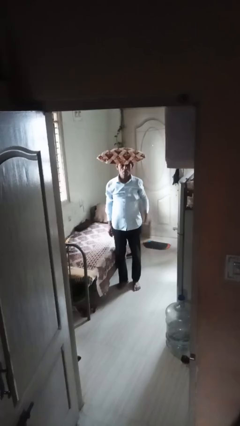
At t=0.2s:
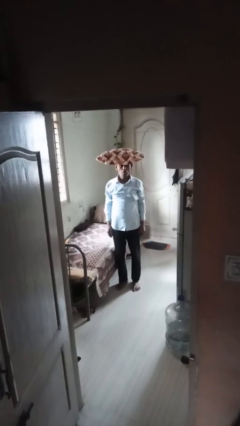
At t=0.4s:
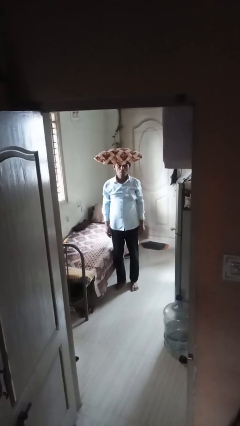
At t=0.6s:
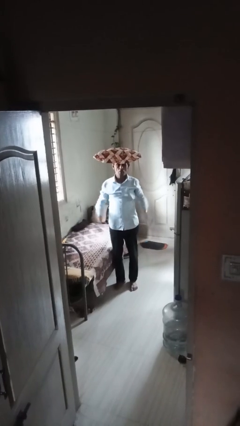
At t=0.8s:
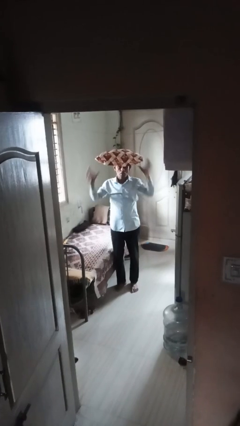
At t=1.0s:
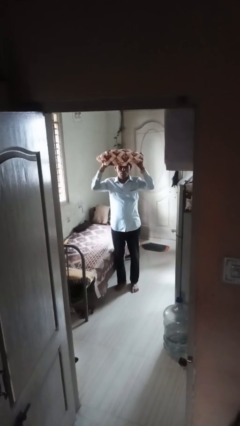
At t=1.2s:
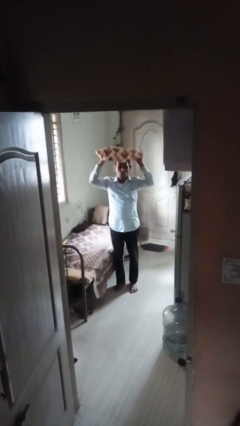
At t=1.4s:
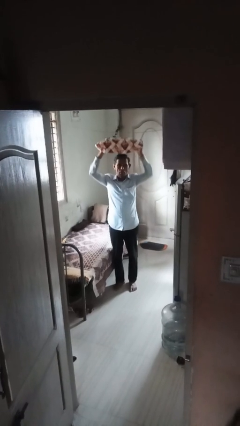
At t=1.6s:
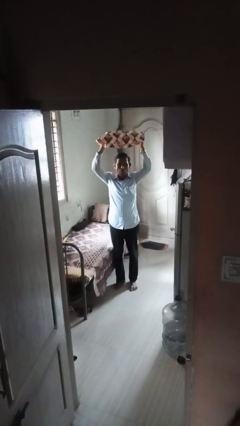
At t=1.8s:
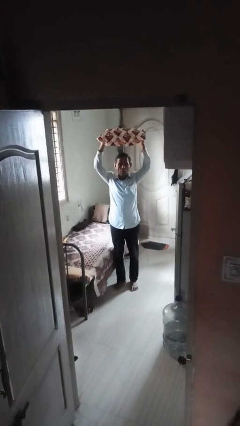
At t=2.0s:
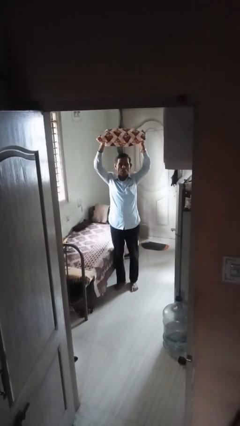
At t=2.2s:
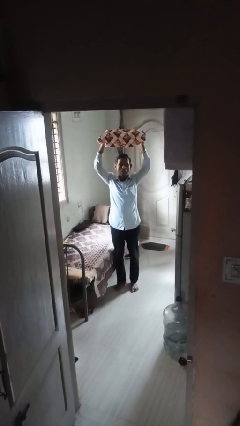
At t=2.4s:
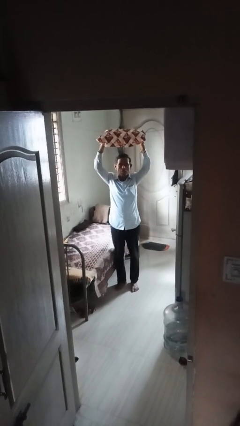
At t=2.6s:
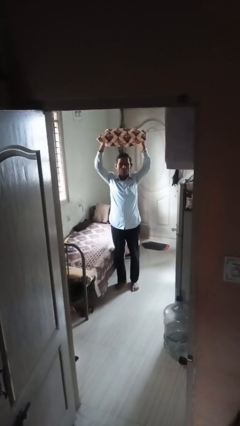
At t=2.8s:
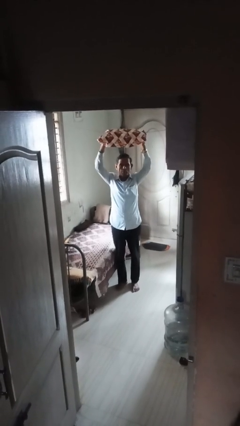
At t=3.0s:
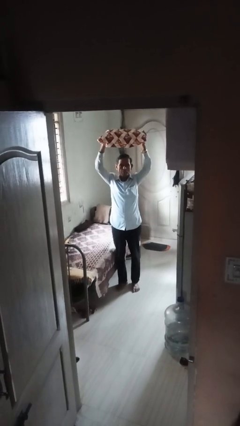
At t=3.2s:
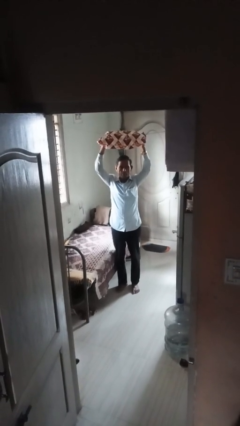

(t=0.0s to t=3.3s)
person holds object above head

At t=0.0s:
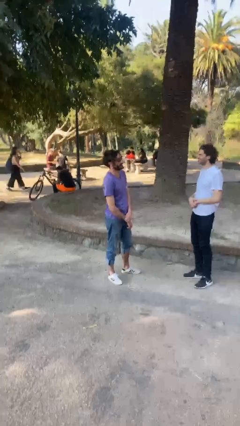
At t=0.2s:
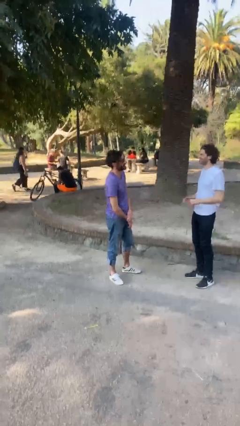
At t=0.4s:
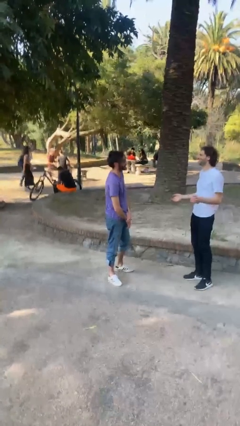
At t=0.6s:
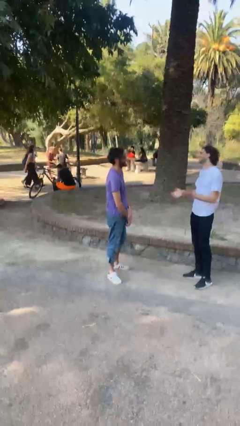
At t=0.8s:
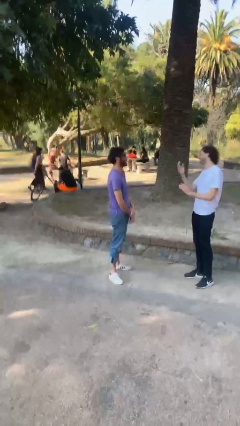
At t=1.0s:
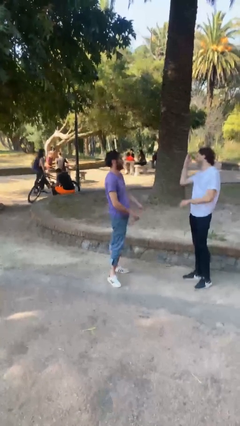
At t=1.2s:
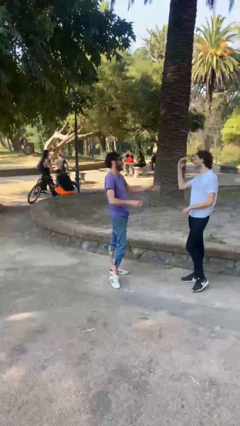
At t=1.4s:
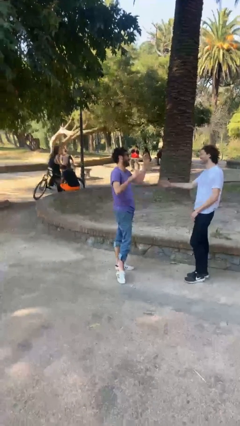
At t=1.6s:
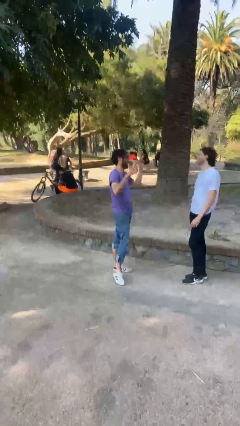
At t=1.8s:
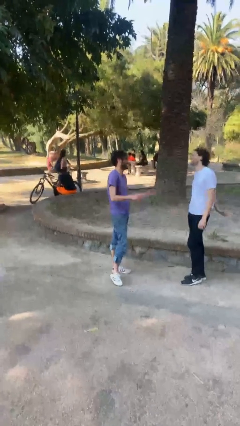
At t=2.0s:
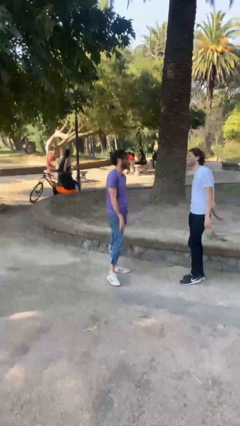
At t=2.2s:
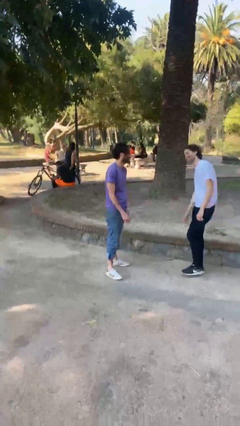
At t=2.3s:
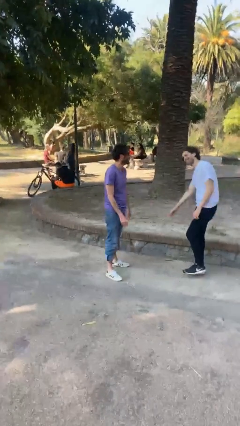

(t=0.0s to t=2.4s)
person laughs with person

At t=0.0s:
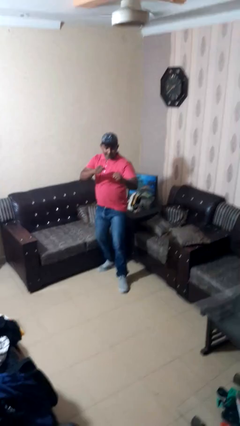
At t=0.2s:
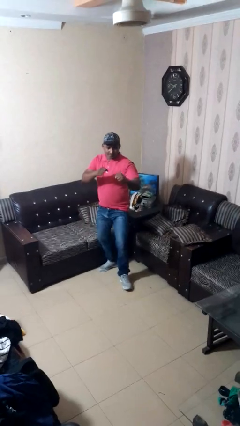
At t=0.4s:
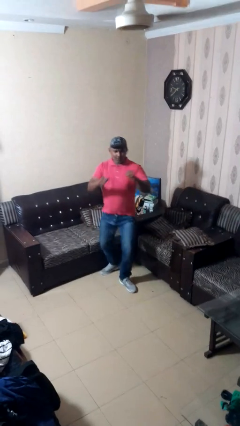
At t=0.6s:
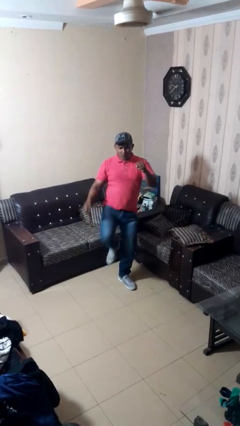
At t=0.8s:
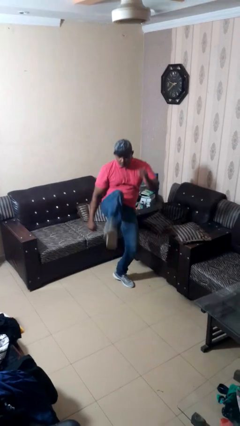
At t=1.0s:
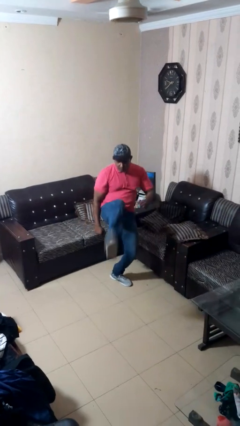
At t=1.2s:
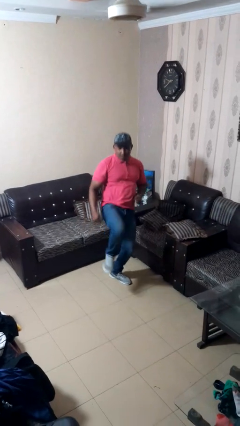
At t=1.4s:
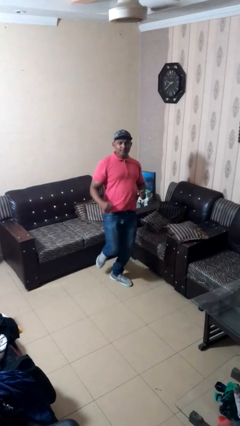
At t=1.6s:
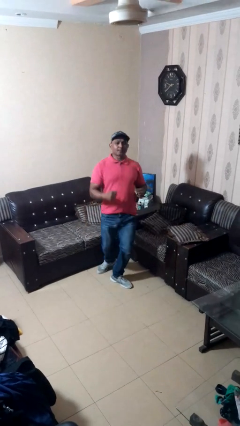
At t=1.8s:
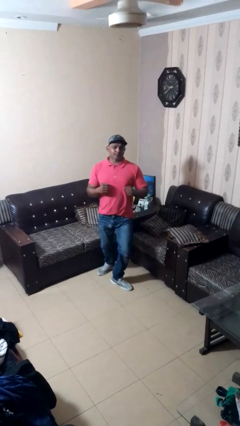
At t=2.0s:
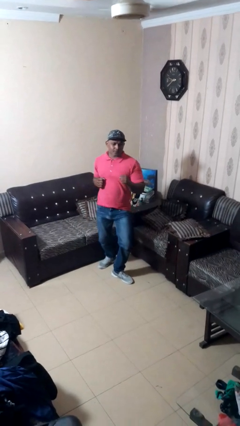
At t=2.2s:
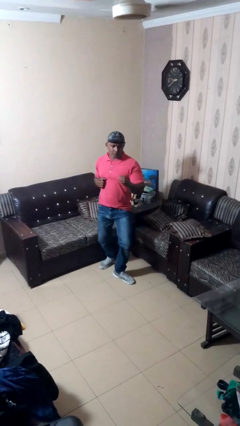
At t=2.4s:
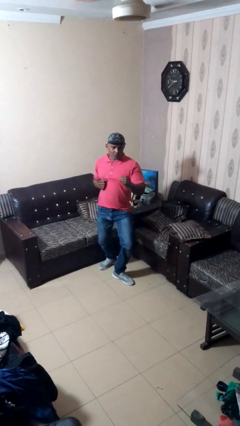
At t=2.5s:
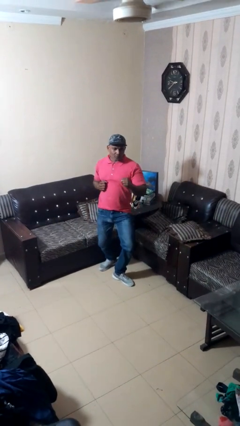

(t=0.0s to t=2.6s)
person karate kicks

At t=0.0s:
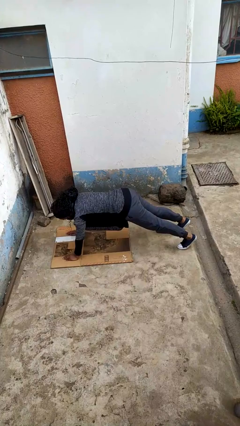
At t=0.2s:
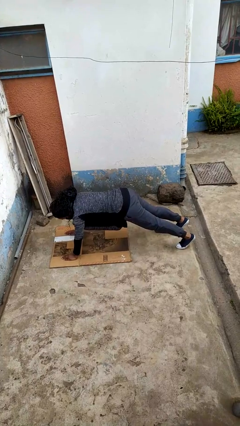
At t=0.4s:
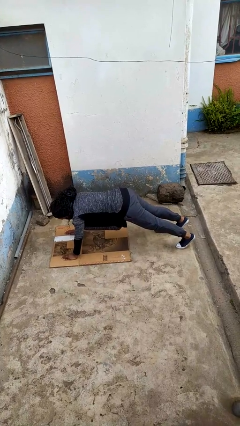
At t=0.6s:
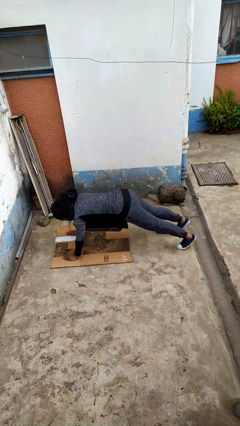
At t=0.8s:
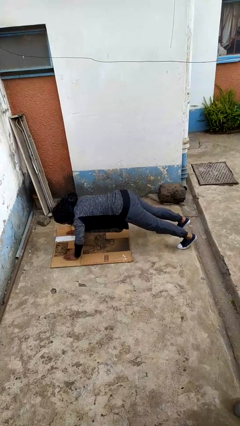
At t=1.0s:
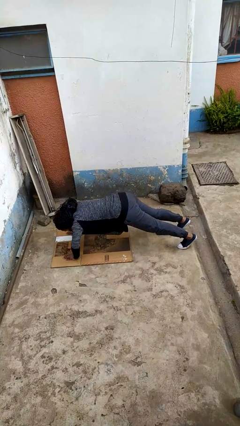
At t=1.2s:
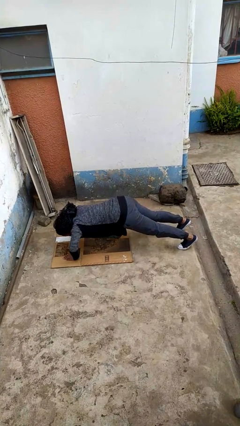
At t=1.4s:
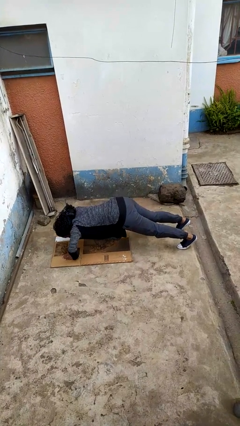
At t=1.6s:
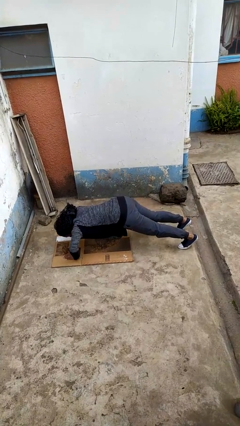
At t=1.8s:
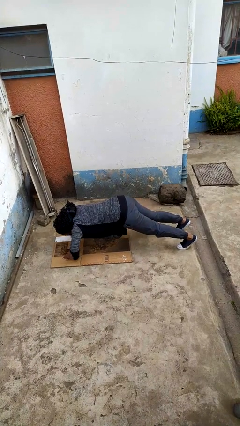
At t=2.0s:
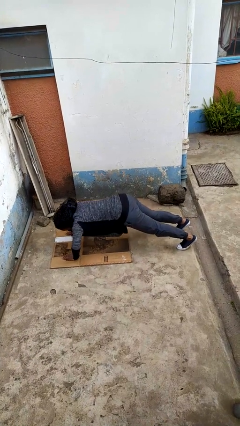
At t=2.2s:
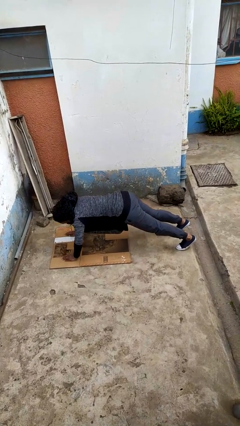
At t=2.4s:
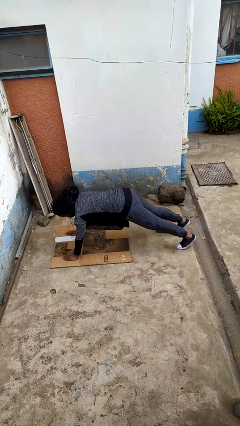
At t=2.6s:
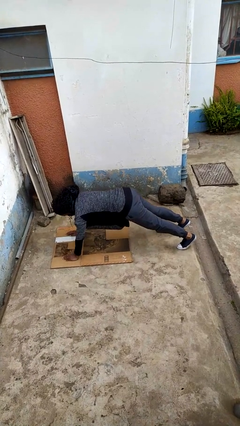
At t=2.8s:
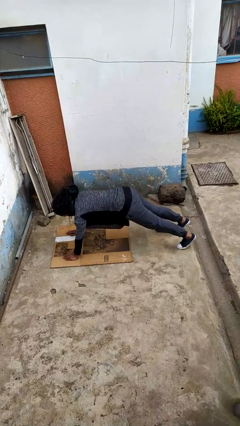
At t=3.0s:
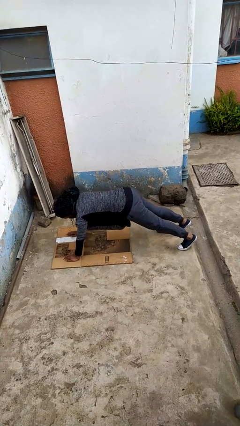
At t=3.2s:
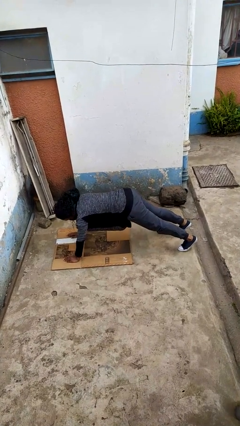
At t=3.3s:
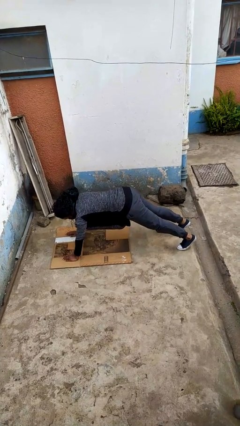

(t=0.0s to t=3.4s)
person exercises with pushup

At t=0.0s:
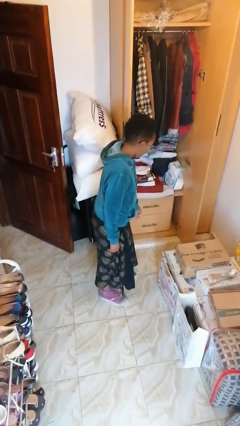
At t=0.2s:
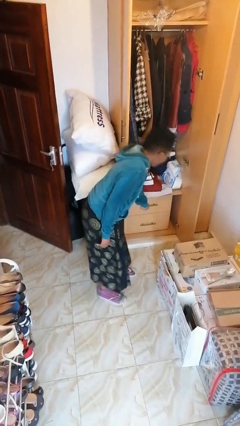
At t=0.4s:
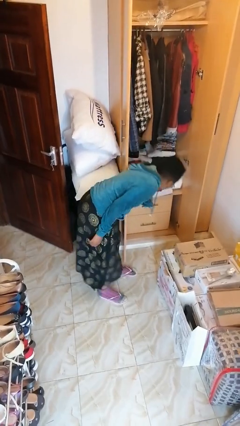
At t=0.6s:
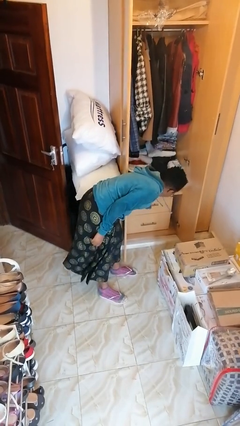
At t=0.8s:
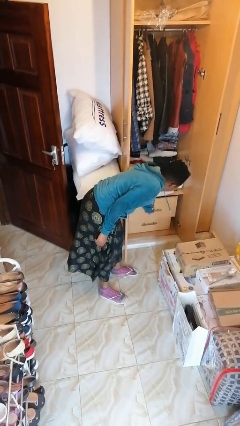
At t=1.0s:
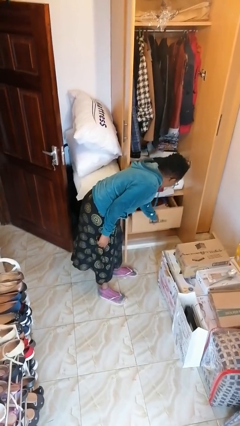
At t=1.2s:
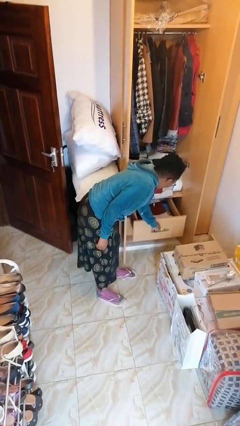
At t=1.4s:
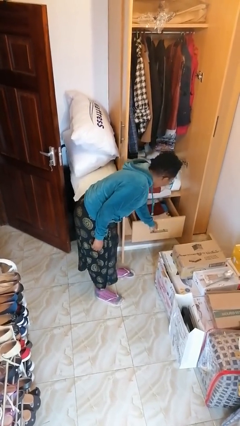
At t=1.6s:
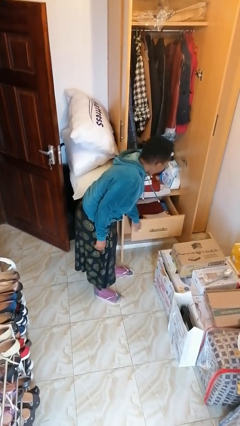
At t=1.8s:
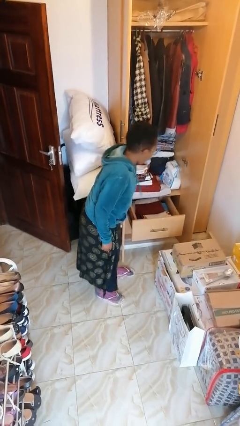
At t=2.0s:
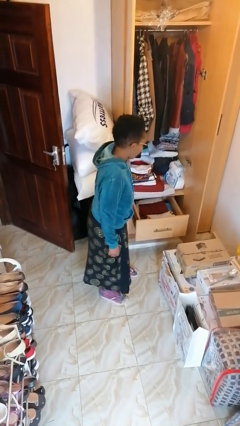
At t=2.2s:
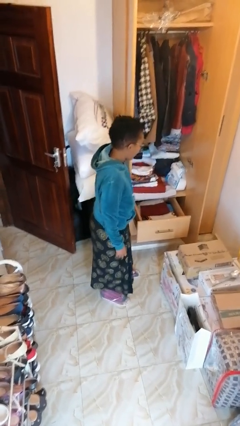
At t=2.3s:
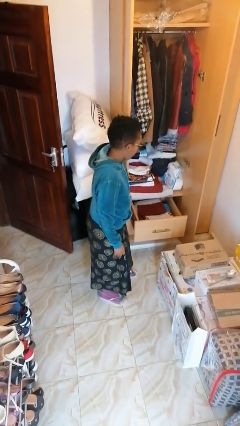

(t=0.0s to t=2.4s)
person opens dresser drawer

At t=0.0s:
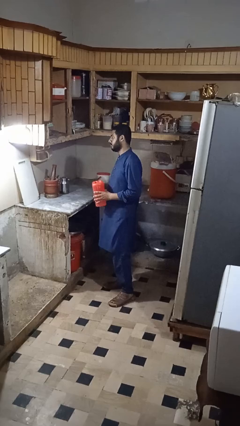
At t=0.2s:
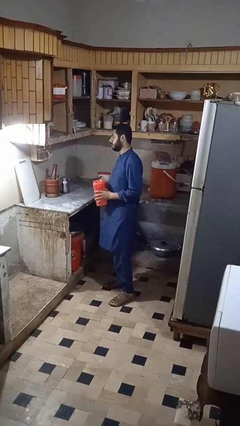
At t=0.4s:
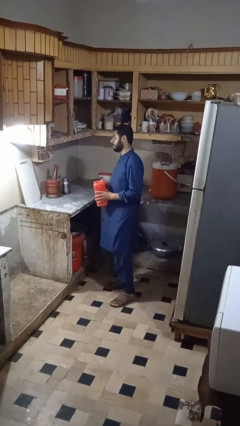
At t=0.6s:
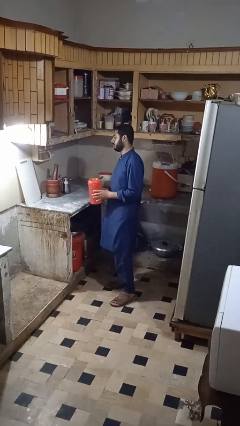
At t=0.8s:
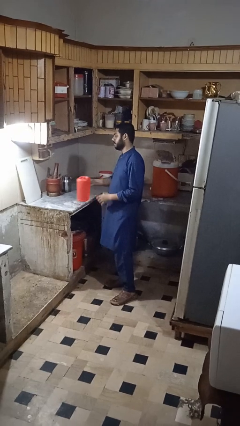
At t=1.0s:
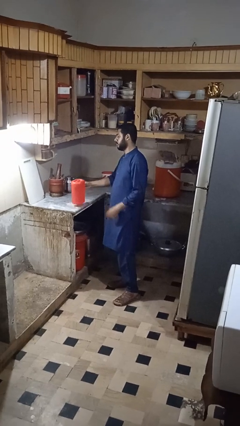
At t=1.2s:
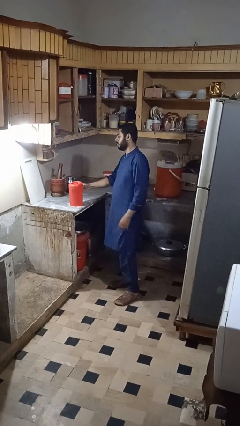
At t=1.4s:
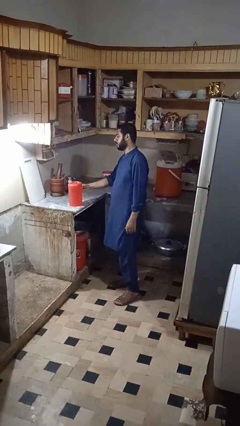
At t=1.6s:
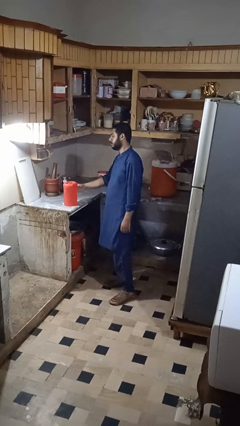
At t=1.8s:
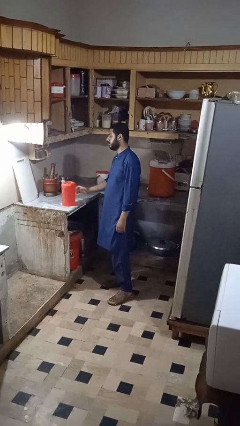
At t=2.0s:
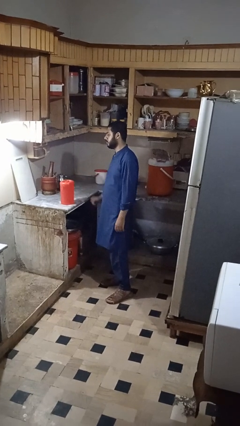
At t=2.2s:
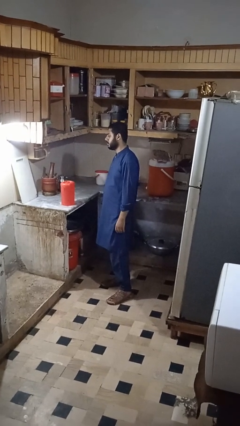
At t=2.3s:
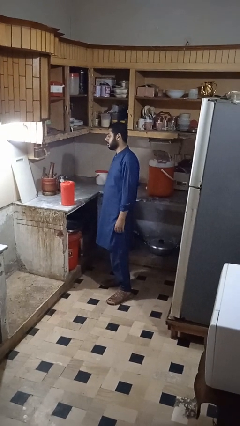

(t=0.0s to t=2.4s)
person puts down object on countertop

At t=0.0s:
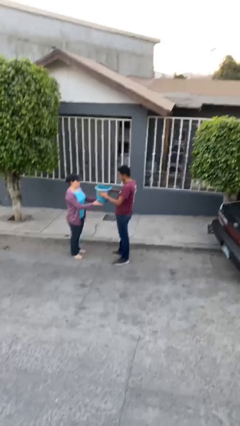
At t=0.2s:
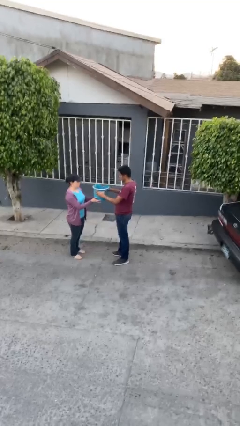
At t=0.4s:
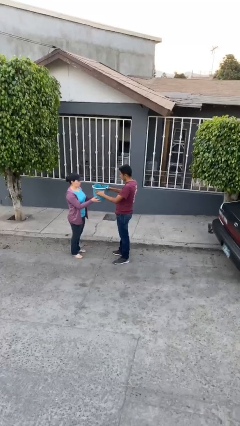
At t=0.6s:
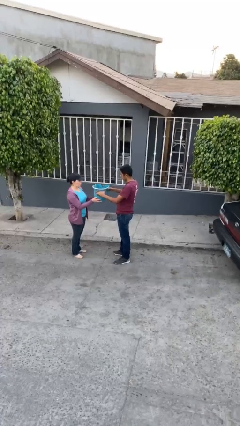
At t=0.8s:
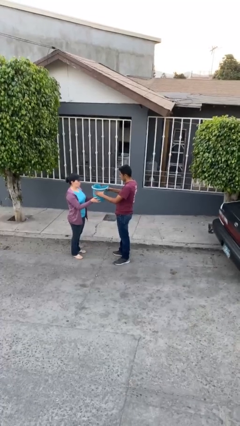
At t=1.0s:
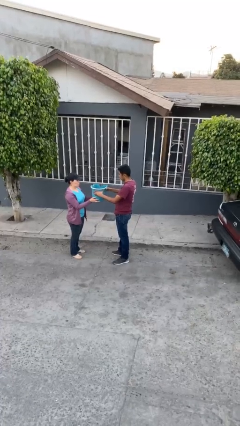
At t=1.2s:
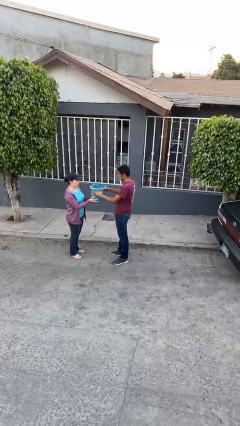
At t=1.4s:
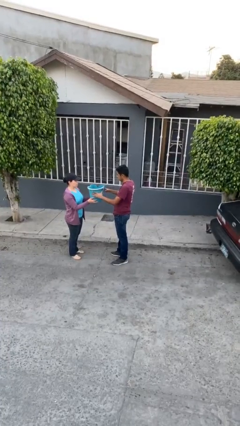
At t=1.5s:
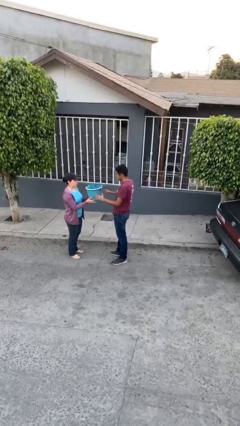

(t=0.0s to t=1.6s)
person transfers object to person
